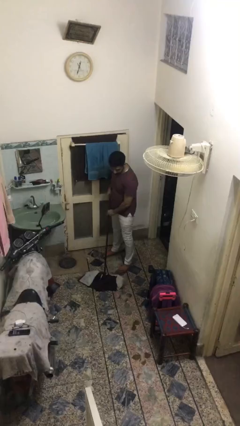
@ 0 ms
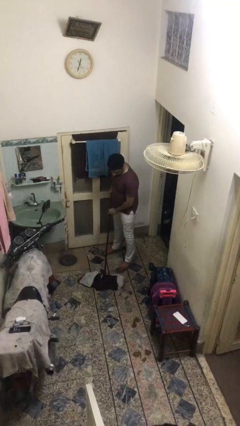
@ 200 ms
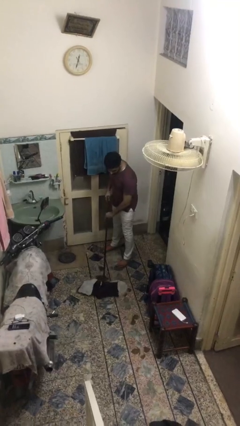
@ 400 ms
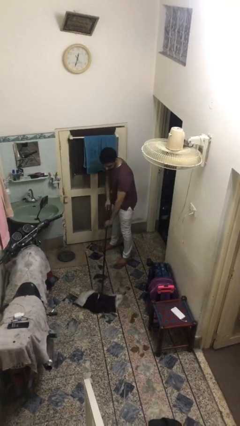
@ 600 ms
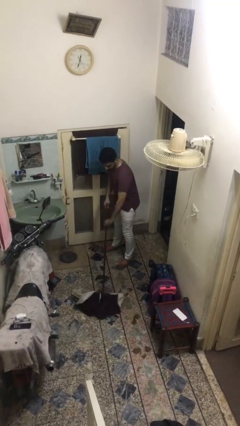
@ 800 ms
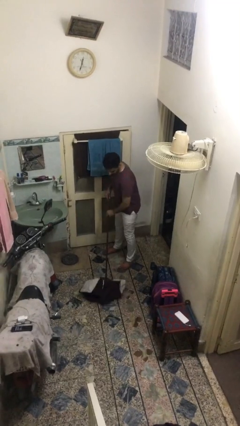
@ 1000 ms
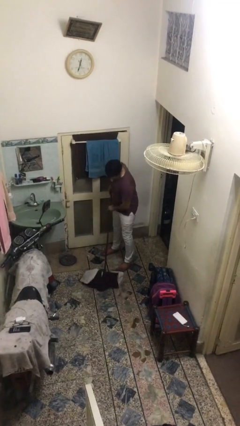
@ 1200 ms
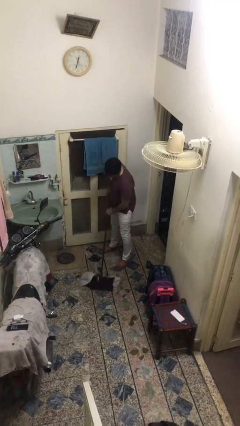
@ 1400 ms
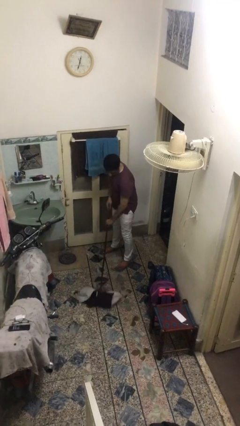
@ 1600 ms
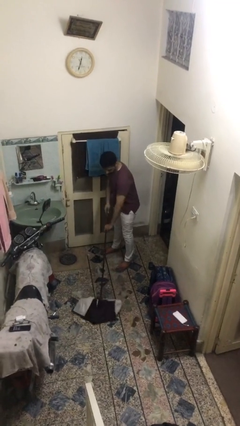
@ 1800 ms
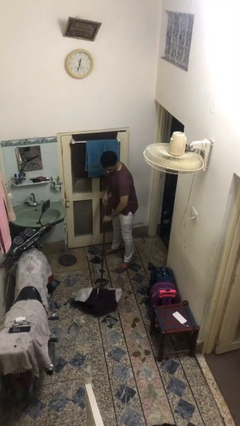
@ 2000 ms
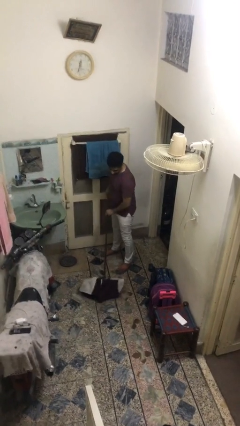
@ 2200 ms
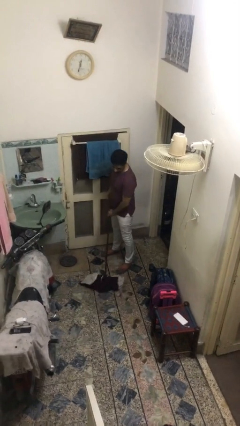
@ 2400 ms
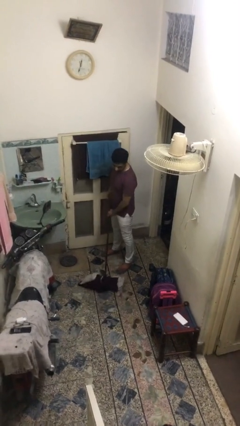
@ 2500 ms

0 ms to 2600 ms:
person sweeps floor

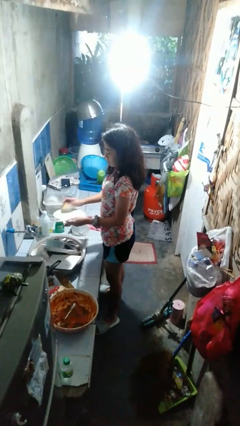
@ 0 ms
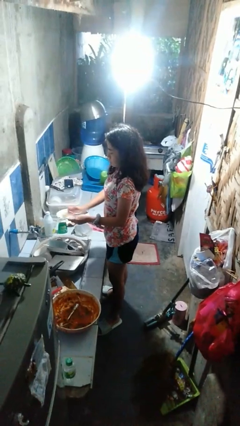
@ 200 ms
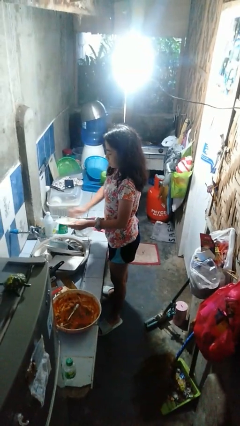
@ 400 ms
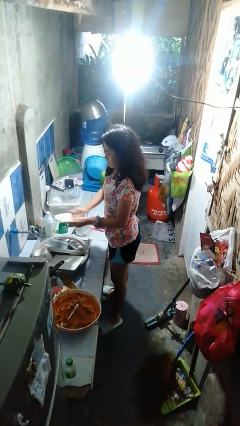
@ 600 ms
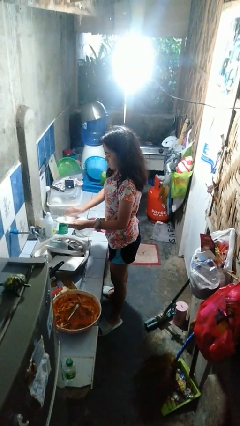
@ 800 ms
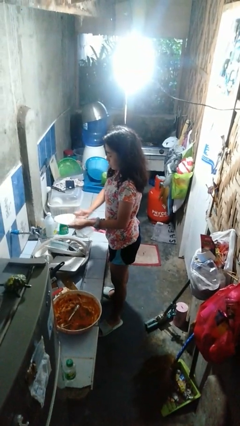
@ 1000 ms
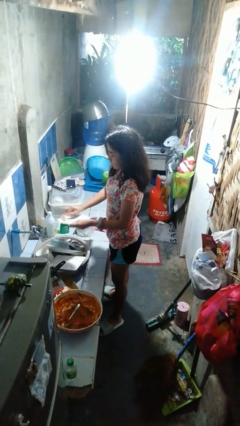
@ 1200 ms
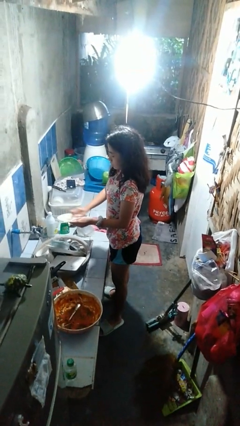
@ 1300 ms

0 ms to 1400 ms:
person washes dish

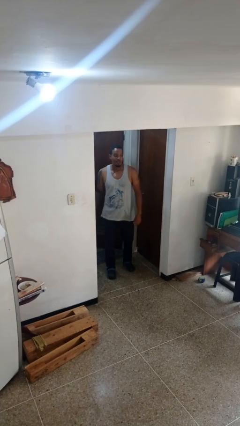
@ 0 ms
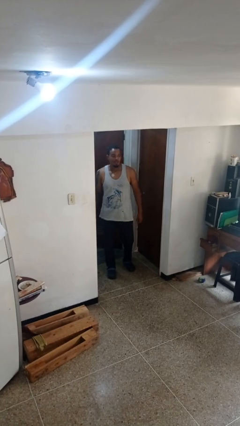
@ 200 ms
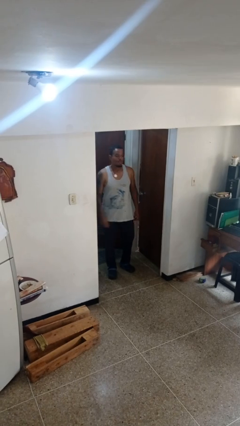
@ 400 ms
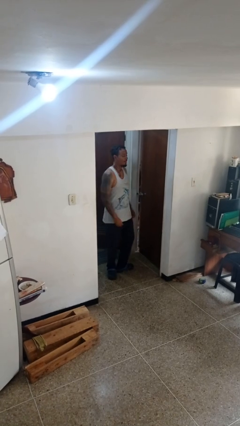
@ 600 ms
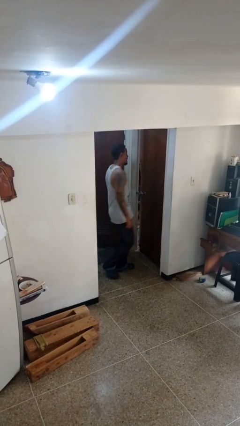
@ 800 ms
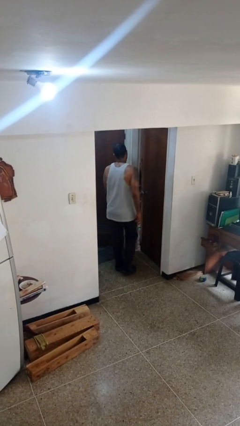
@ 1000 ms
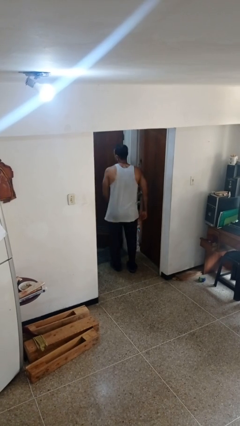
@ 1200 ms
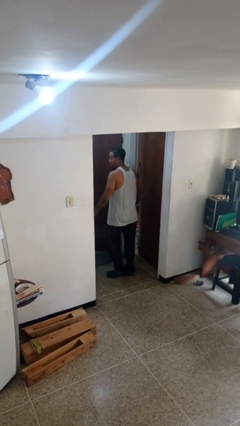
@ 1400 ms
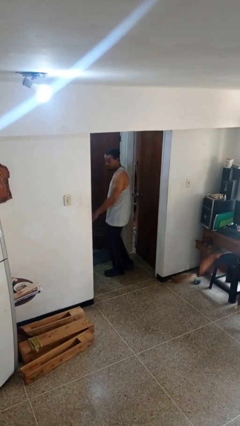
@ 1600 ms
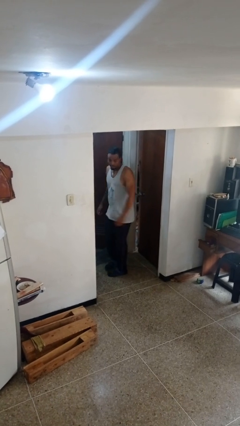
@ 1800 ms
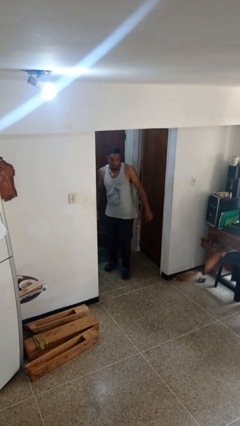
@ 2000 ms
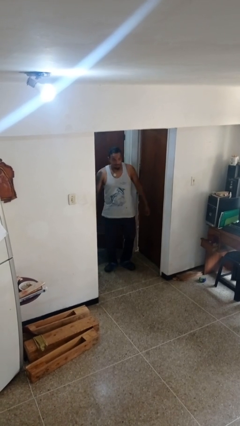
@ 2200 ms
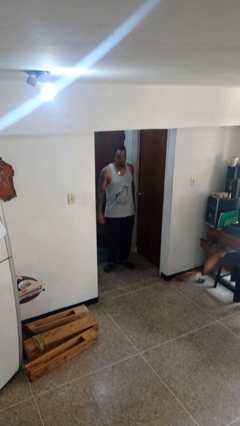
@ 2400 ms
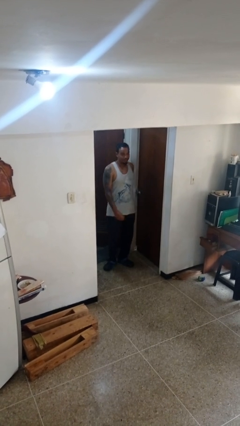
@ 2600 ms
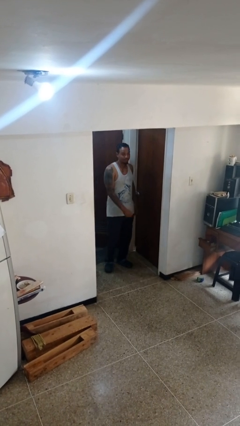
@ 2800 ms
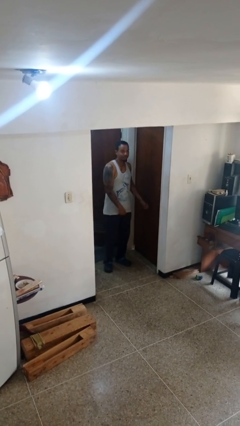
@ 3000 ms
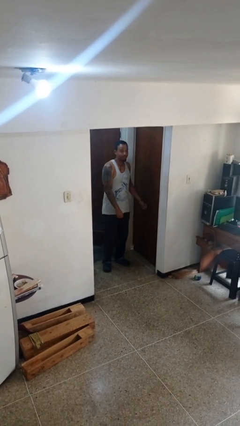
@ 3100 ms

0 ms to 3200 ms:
person twirls

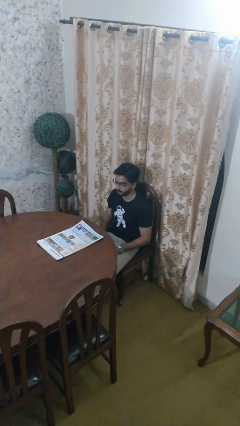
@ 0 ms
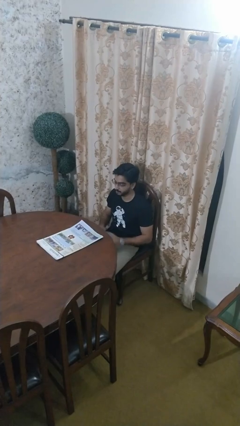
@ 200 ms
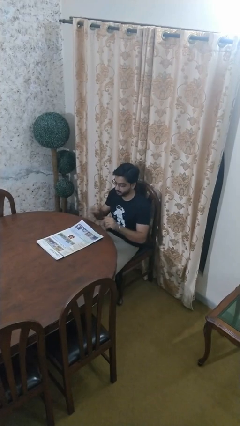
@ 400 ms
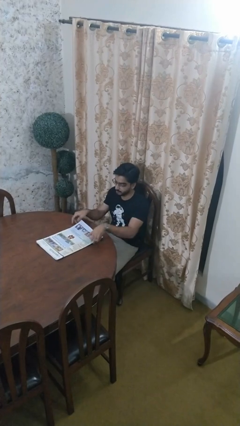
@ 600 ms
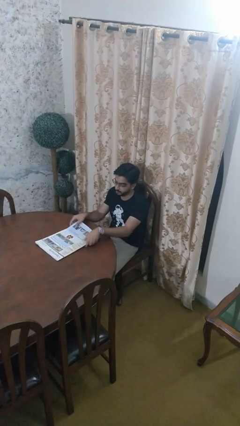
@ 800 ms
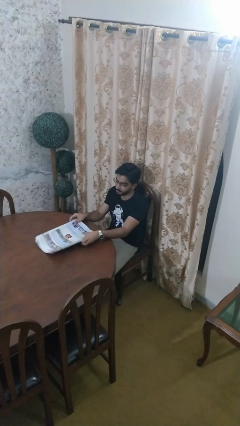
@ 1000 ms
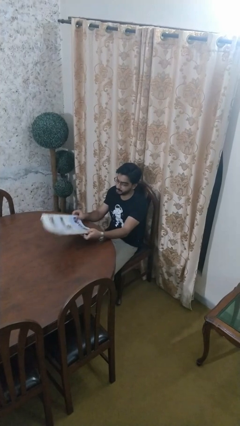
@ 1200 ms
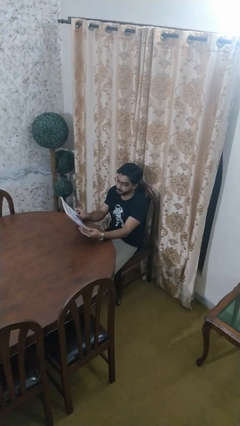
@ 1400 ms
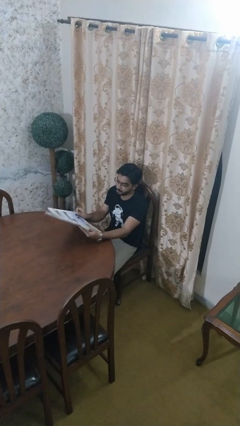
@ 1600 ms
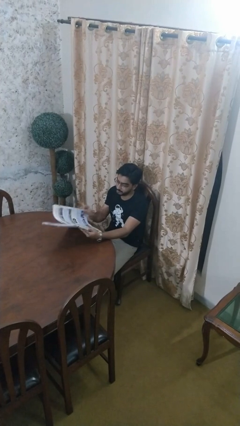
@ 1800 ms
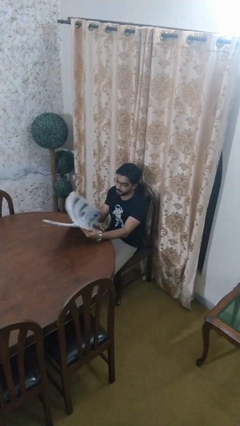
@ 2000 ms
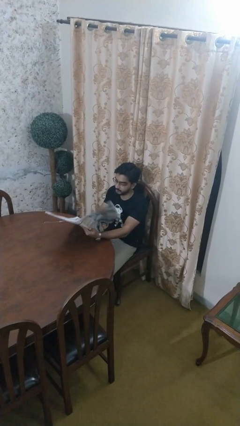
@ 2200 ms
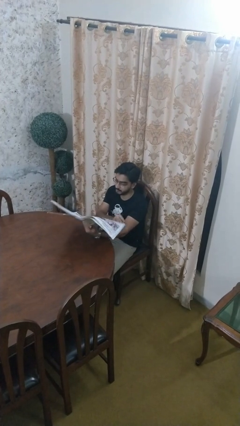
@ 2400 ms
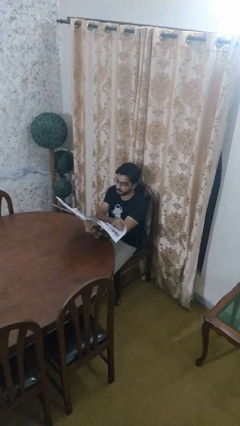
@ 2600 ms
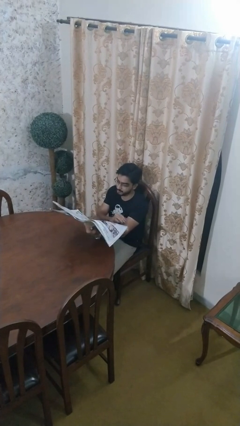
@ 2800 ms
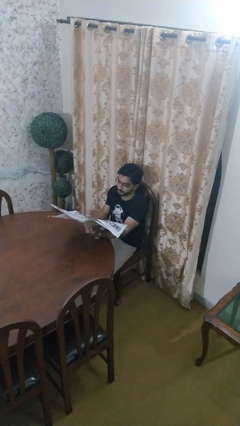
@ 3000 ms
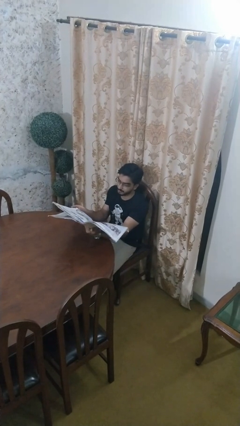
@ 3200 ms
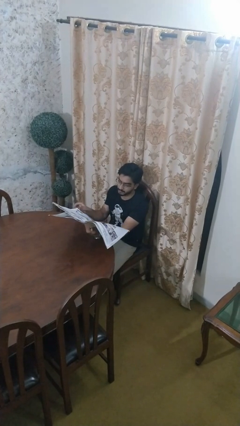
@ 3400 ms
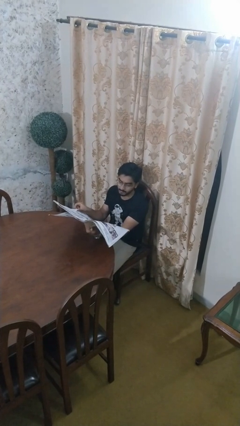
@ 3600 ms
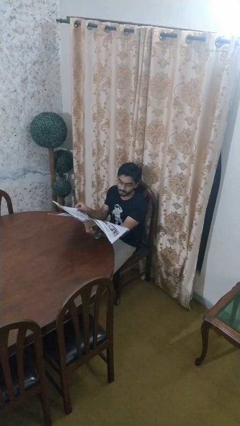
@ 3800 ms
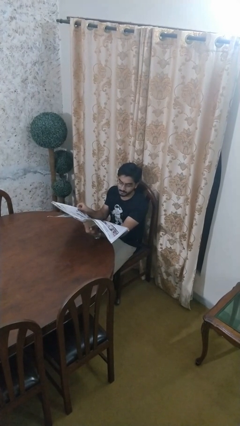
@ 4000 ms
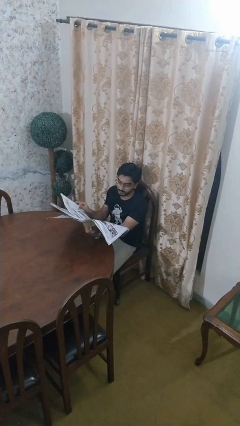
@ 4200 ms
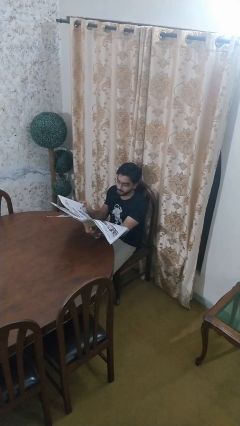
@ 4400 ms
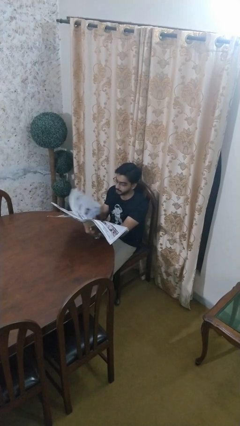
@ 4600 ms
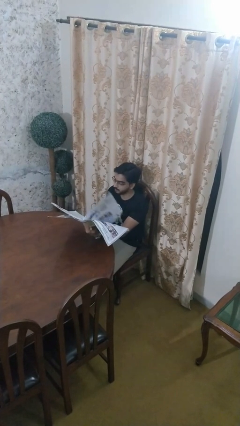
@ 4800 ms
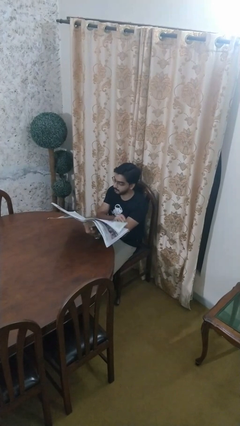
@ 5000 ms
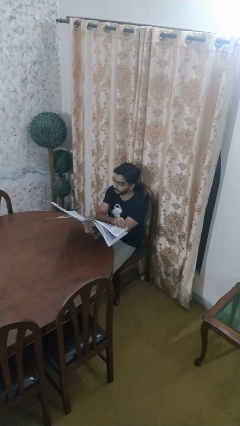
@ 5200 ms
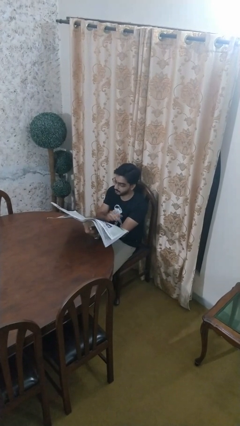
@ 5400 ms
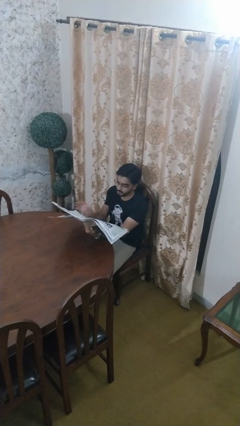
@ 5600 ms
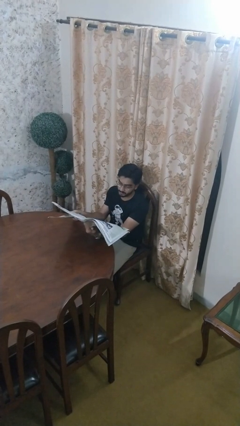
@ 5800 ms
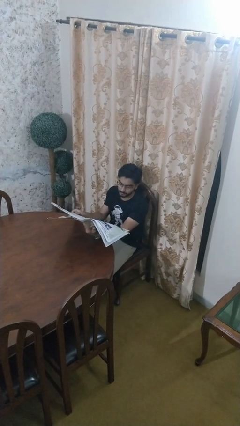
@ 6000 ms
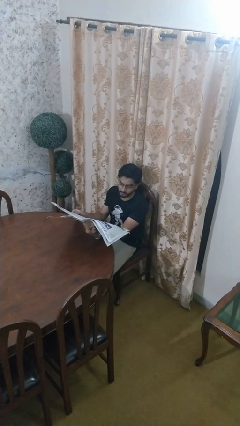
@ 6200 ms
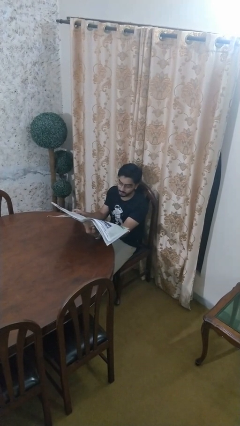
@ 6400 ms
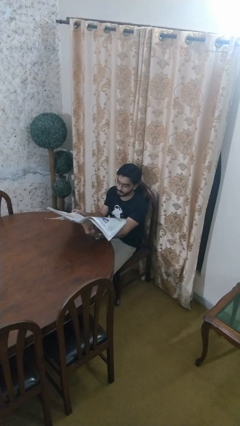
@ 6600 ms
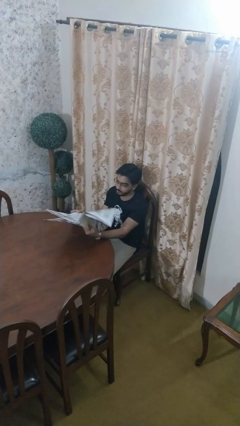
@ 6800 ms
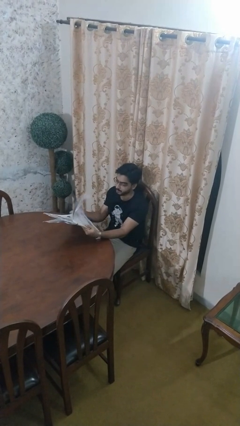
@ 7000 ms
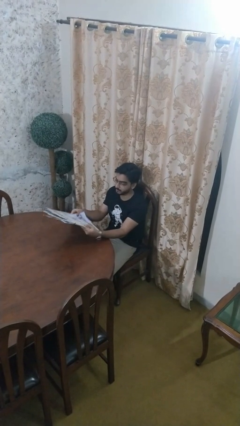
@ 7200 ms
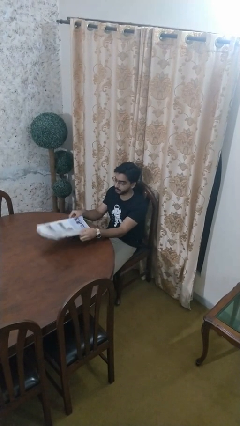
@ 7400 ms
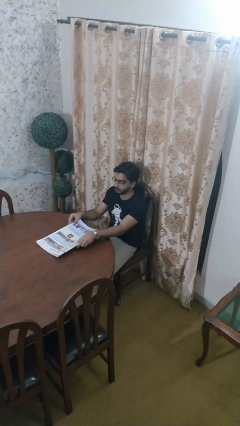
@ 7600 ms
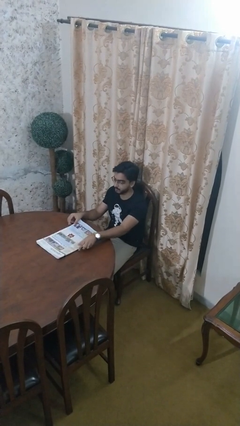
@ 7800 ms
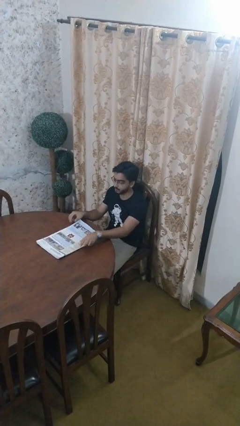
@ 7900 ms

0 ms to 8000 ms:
person reads magazine

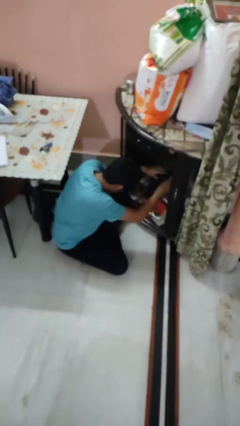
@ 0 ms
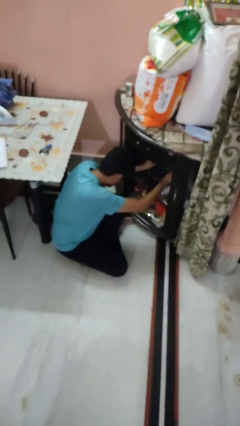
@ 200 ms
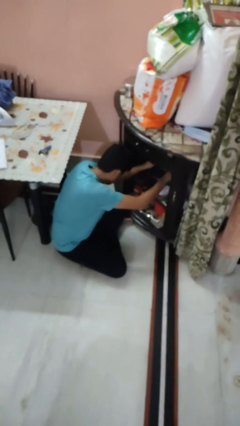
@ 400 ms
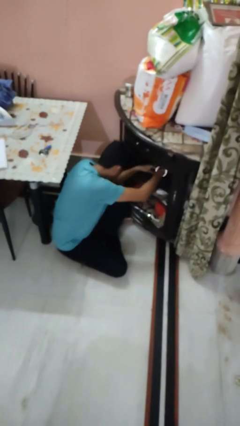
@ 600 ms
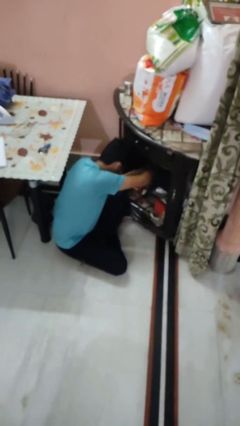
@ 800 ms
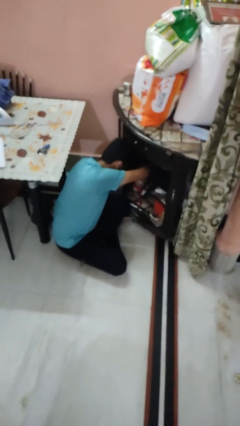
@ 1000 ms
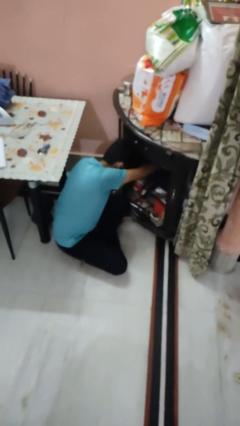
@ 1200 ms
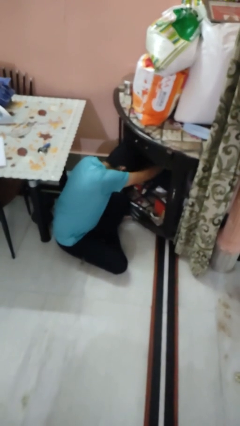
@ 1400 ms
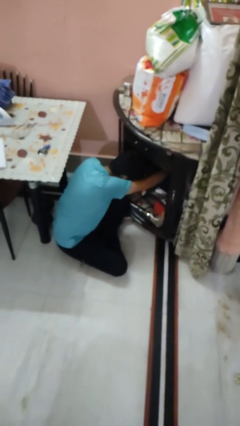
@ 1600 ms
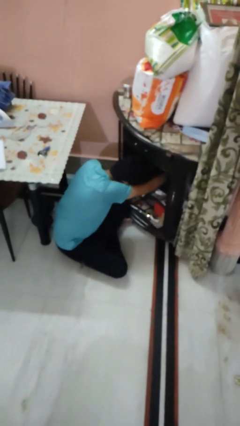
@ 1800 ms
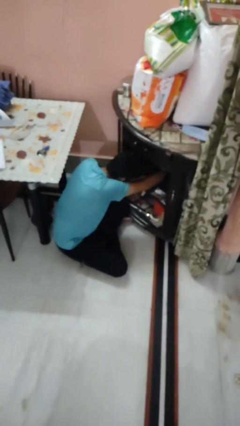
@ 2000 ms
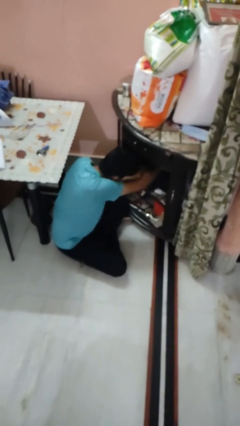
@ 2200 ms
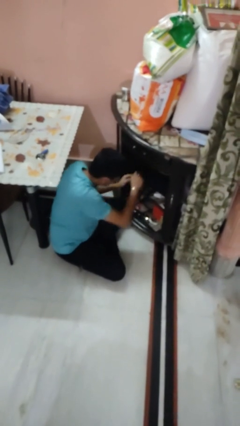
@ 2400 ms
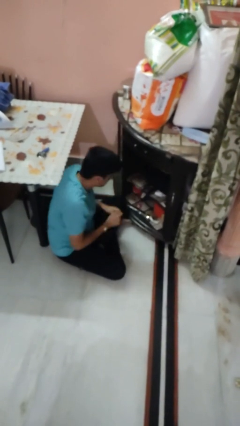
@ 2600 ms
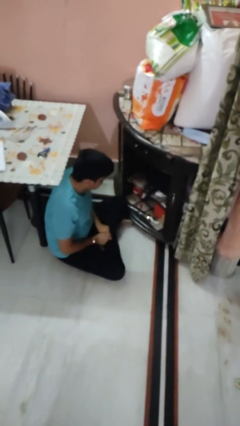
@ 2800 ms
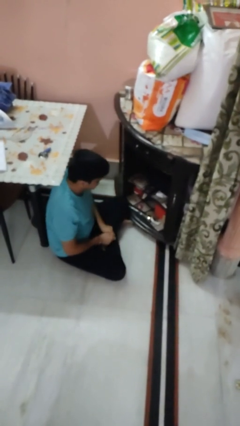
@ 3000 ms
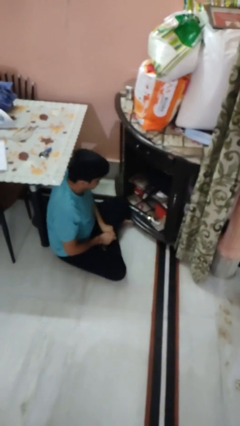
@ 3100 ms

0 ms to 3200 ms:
person searches in cabinet
